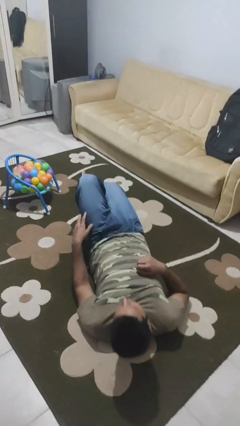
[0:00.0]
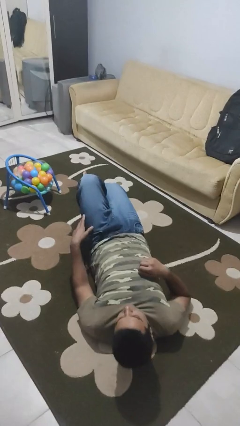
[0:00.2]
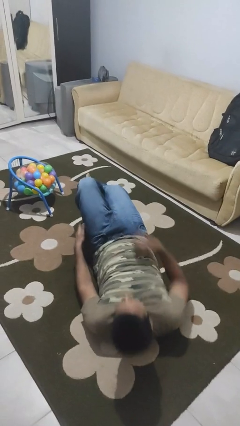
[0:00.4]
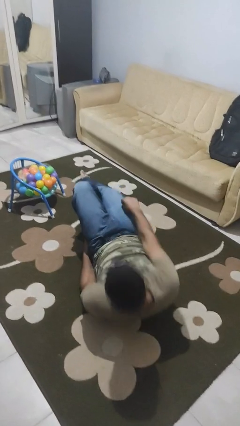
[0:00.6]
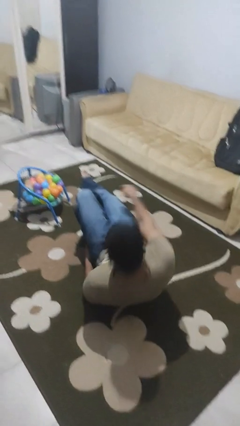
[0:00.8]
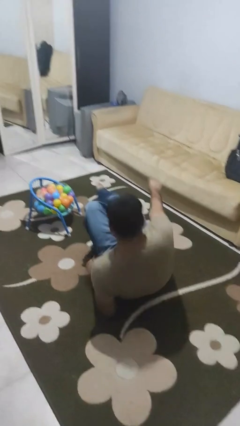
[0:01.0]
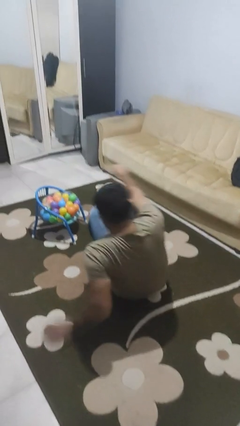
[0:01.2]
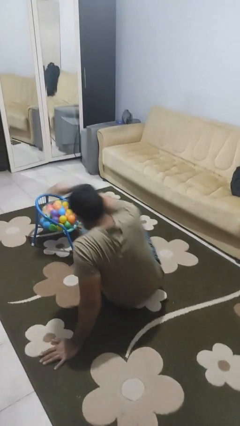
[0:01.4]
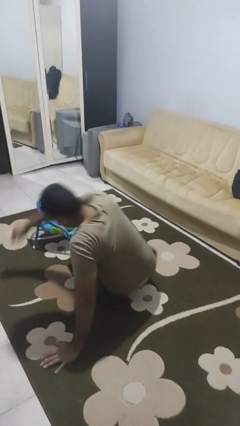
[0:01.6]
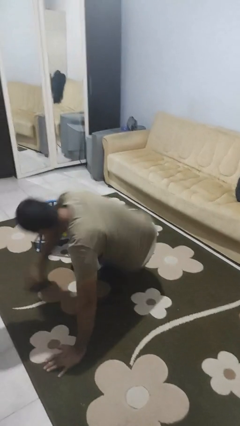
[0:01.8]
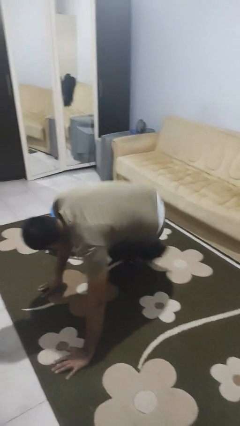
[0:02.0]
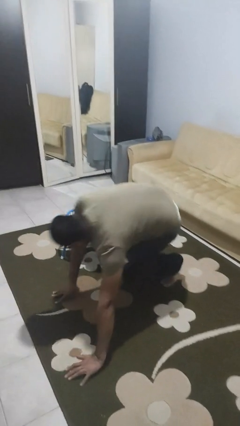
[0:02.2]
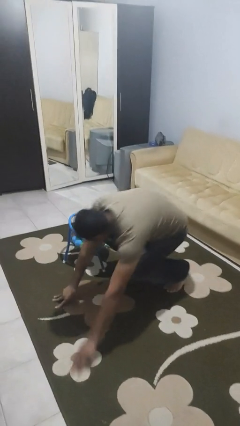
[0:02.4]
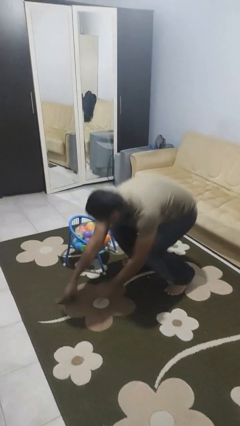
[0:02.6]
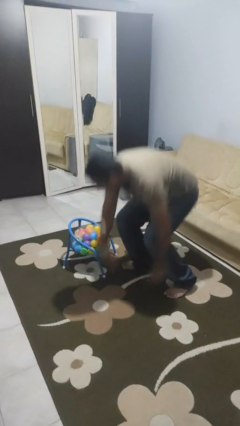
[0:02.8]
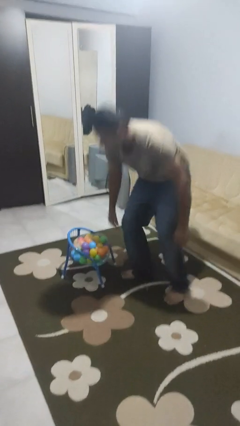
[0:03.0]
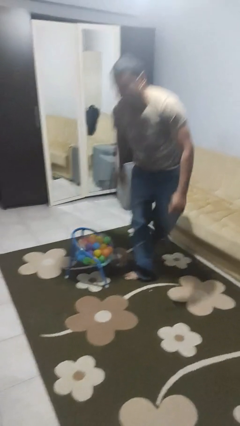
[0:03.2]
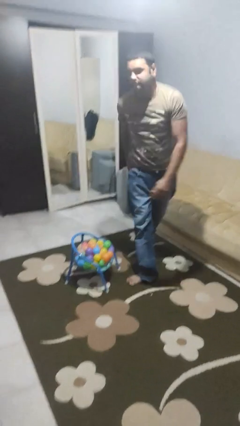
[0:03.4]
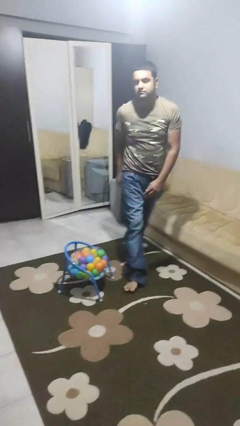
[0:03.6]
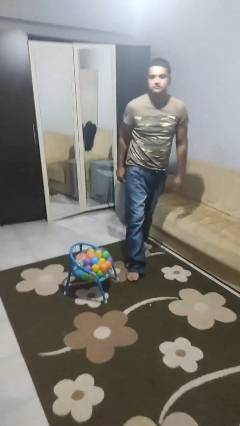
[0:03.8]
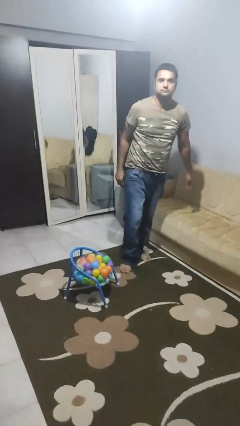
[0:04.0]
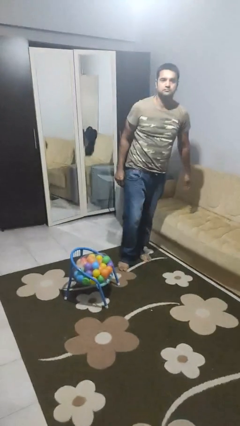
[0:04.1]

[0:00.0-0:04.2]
person stands up from floor

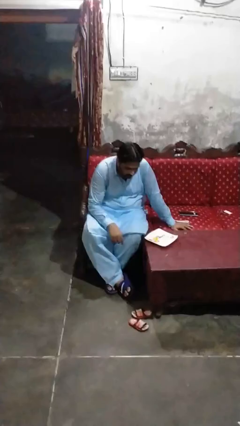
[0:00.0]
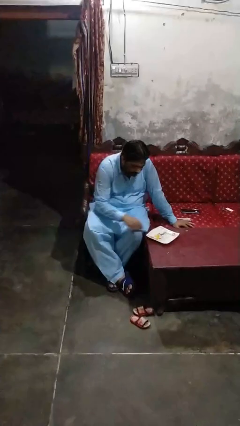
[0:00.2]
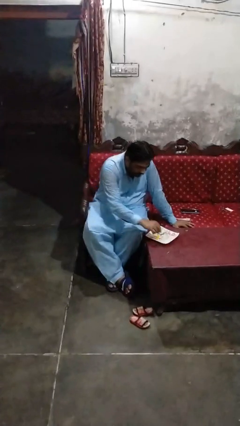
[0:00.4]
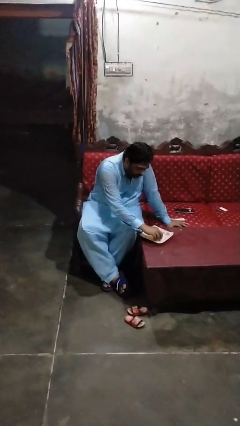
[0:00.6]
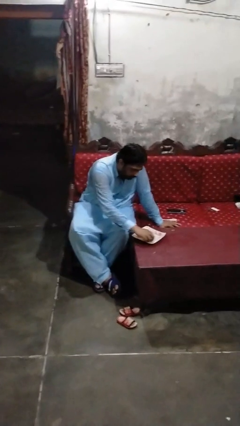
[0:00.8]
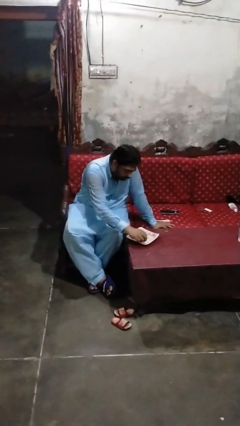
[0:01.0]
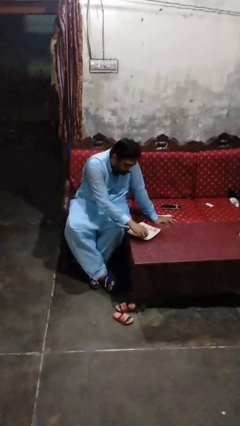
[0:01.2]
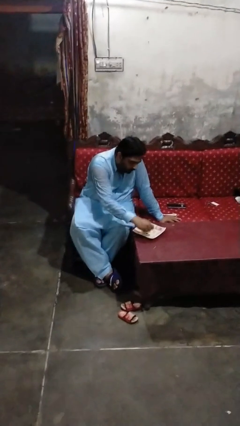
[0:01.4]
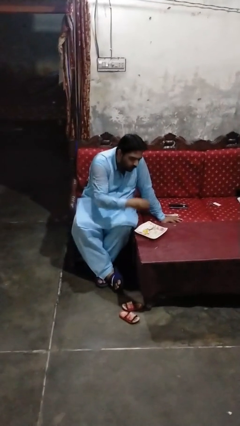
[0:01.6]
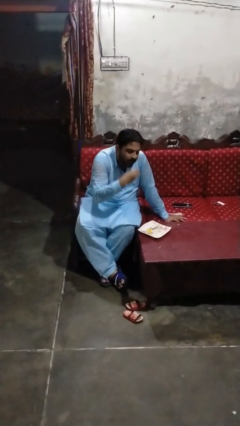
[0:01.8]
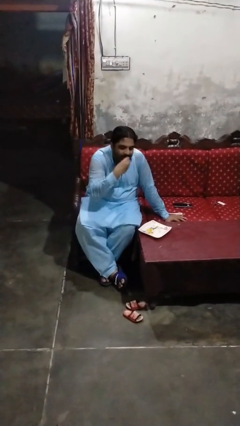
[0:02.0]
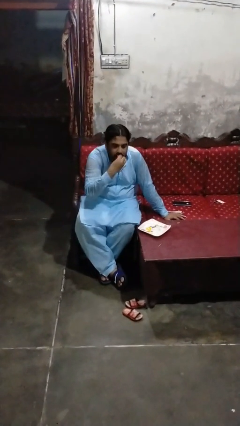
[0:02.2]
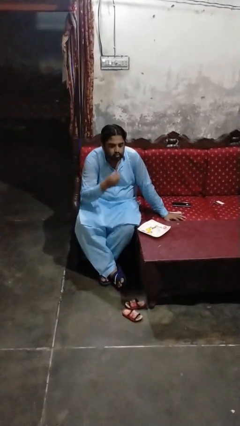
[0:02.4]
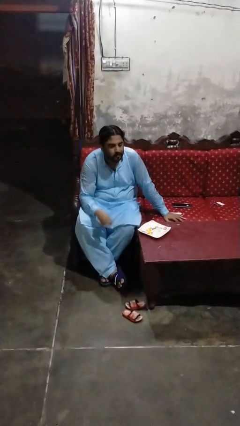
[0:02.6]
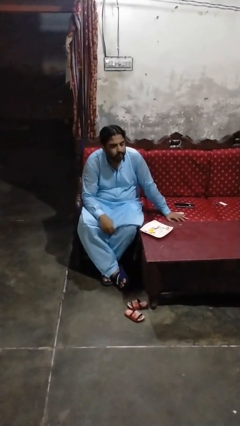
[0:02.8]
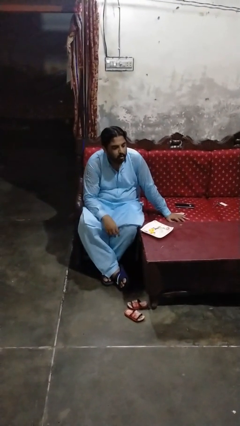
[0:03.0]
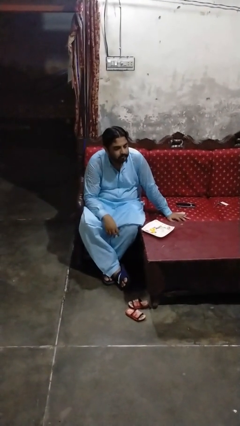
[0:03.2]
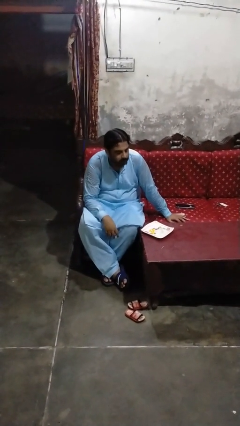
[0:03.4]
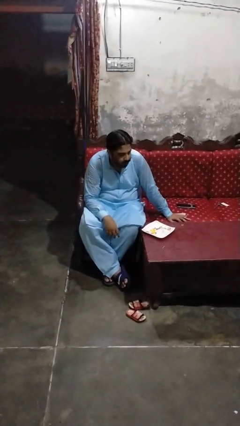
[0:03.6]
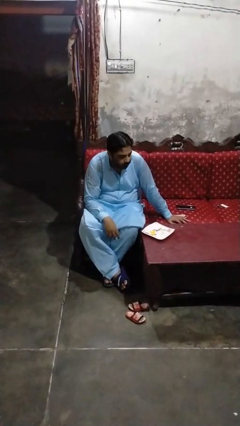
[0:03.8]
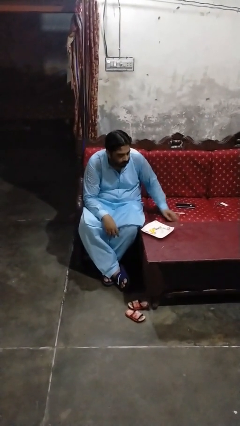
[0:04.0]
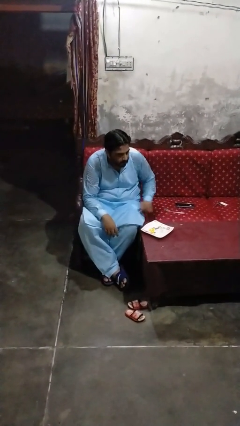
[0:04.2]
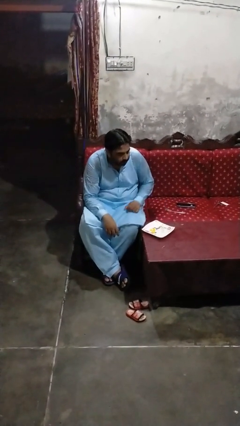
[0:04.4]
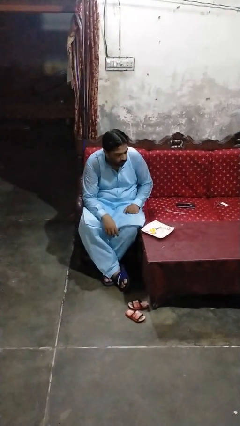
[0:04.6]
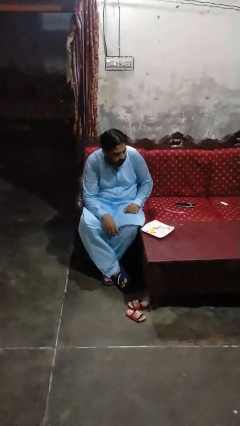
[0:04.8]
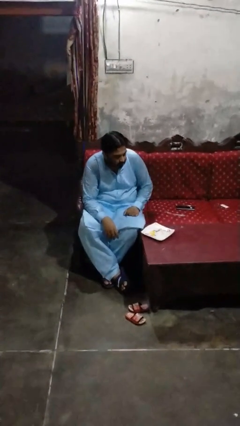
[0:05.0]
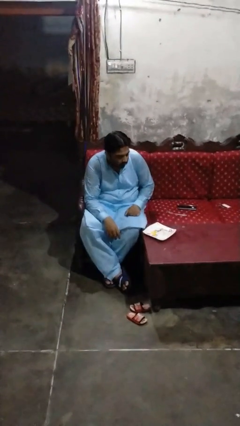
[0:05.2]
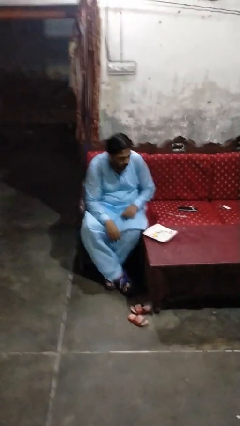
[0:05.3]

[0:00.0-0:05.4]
person eats with hands

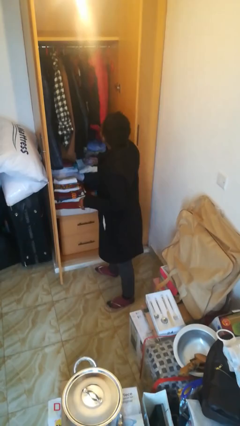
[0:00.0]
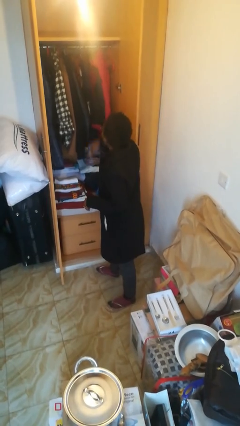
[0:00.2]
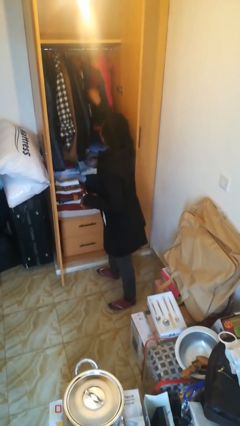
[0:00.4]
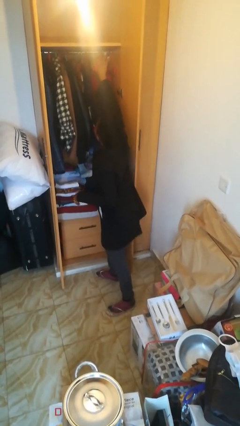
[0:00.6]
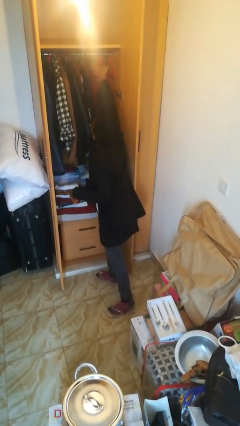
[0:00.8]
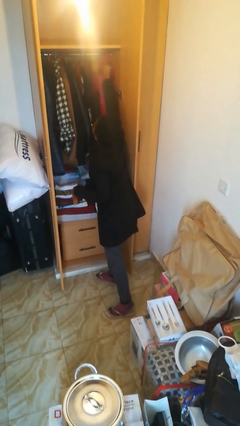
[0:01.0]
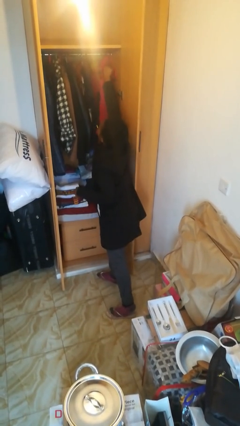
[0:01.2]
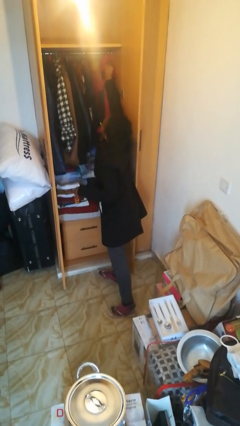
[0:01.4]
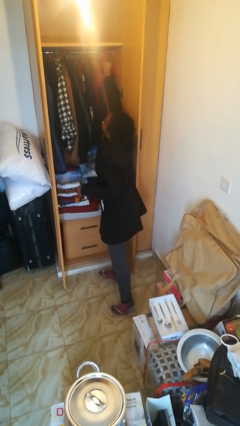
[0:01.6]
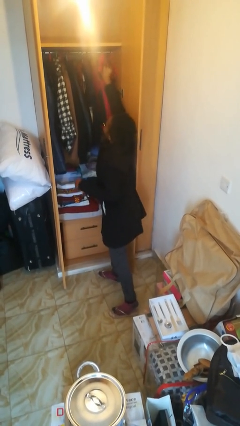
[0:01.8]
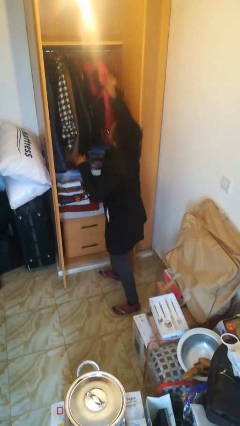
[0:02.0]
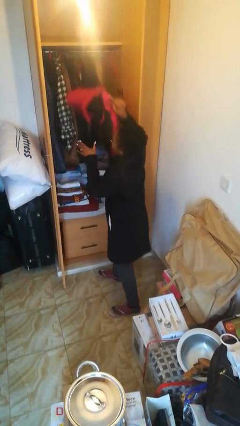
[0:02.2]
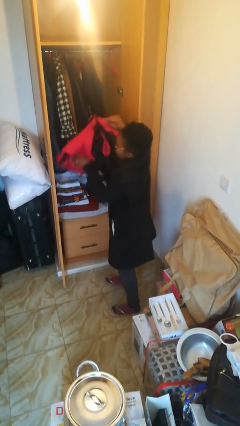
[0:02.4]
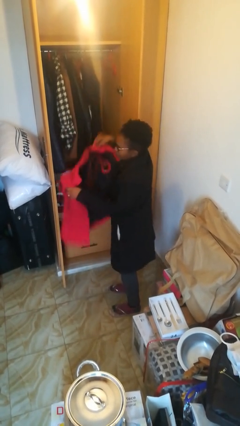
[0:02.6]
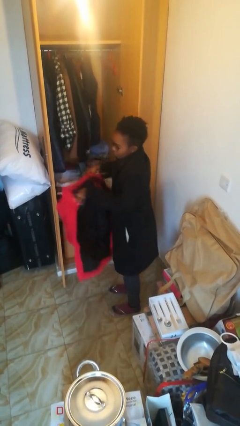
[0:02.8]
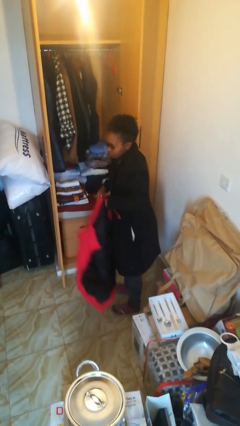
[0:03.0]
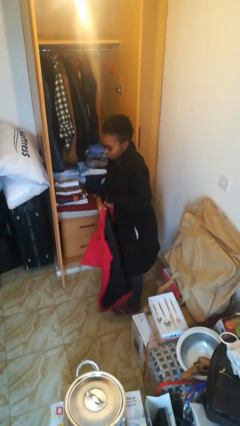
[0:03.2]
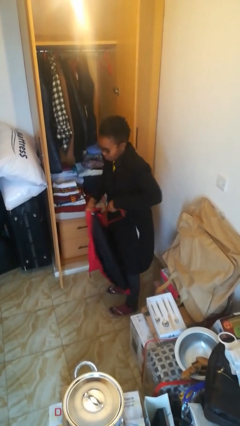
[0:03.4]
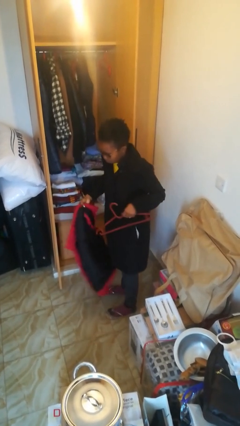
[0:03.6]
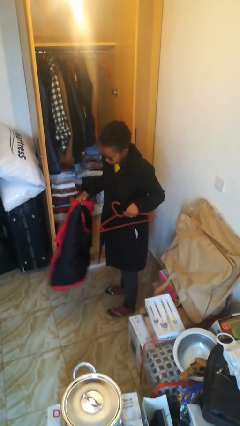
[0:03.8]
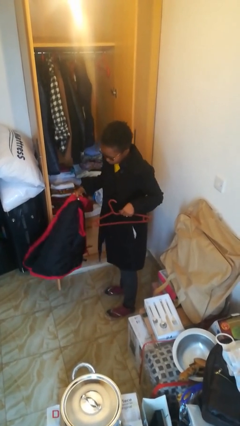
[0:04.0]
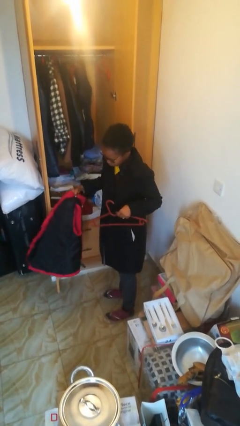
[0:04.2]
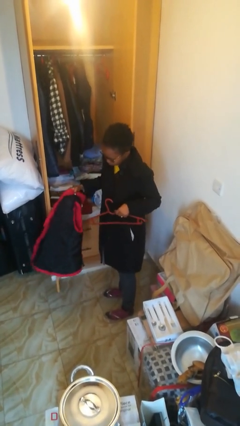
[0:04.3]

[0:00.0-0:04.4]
person takes clothes from closet

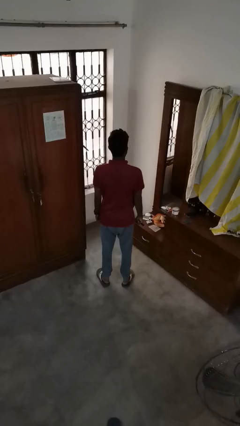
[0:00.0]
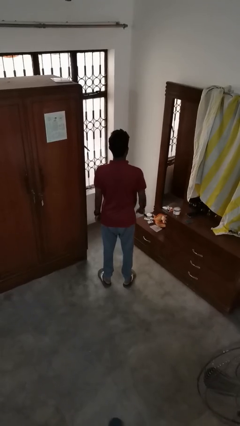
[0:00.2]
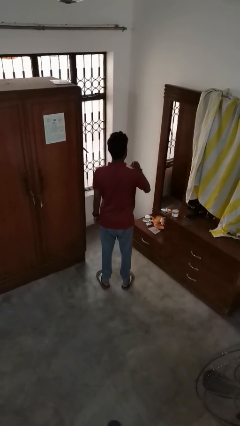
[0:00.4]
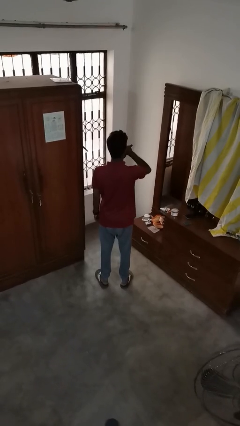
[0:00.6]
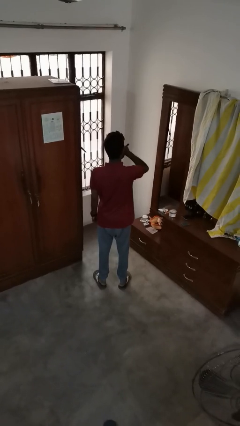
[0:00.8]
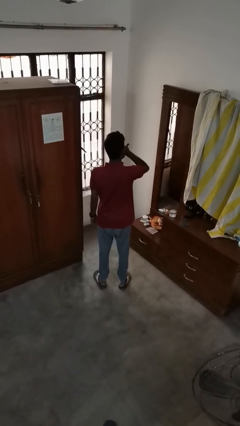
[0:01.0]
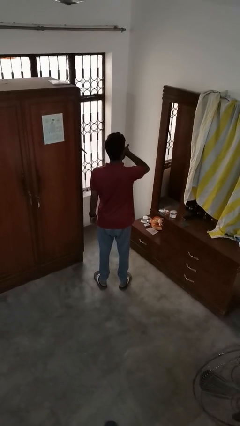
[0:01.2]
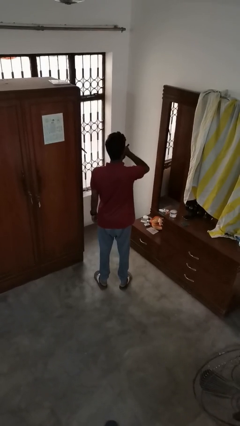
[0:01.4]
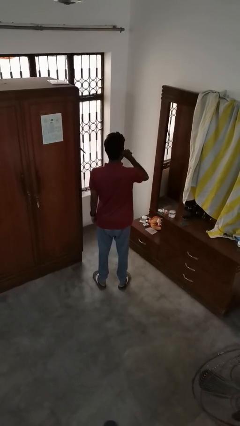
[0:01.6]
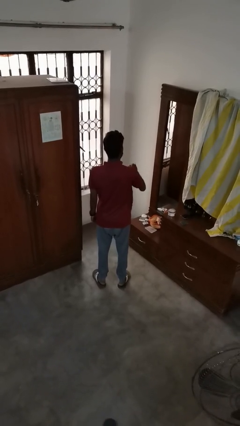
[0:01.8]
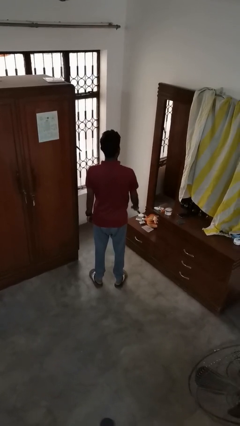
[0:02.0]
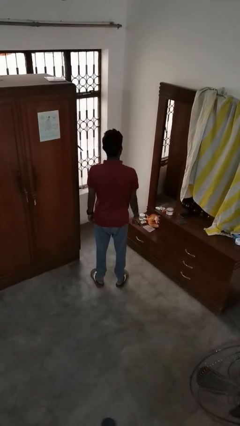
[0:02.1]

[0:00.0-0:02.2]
person vapes

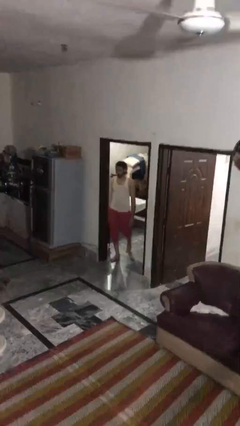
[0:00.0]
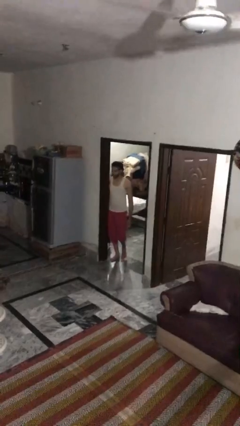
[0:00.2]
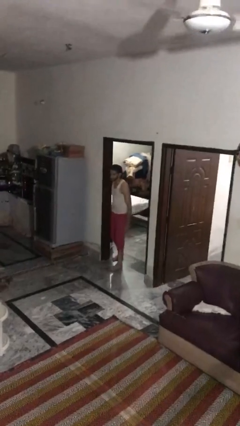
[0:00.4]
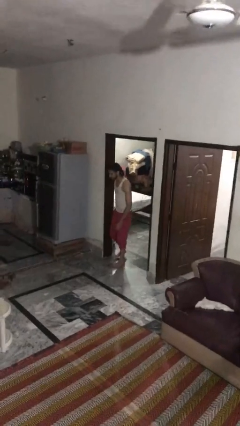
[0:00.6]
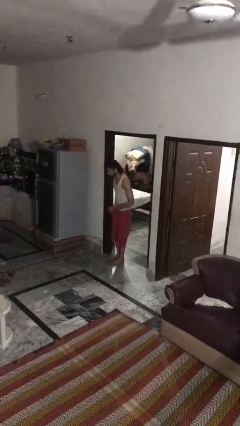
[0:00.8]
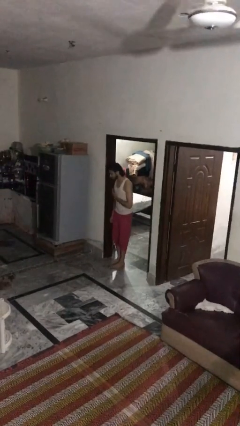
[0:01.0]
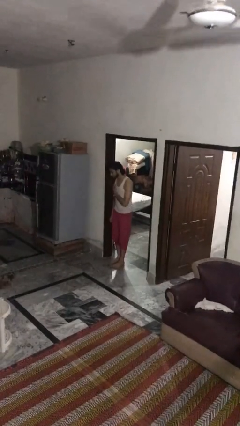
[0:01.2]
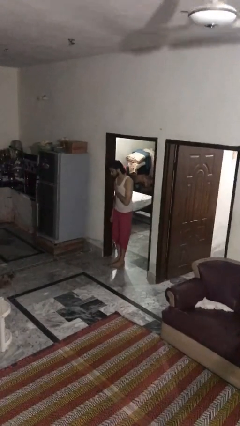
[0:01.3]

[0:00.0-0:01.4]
person bumps into wall

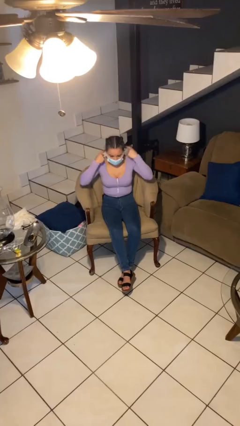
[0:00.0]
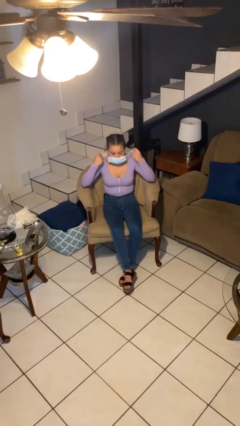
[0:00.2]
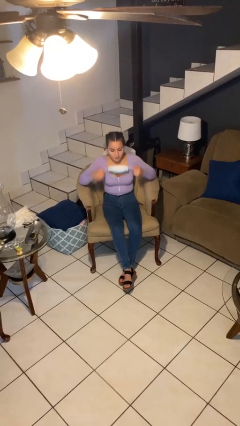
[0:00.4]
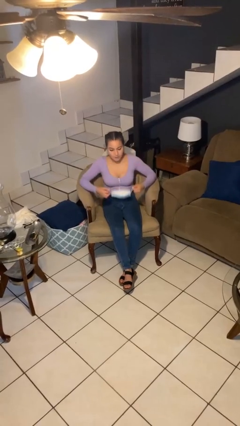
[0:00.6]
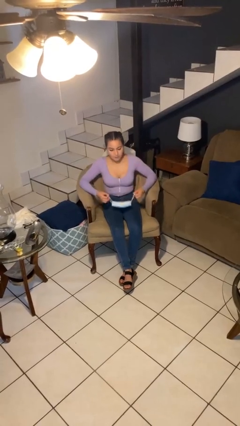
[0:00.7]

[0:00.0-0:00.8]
person takes off facemask
